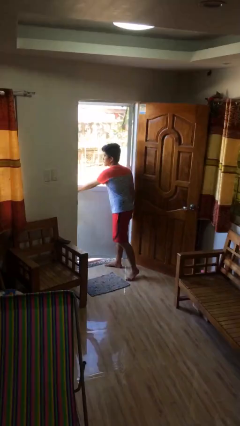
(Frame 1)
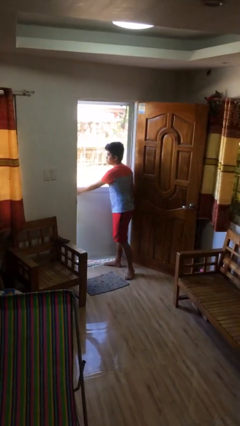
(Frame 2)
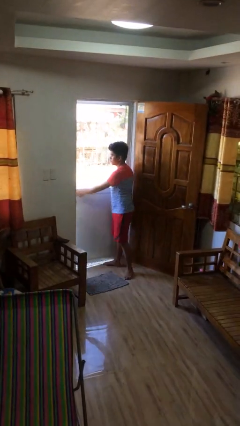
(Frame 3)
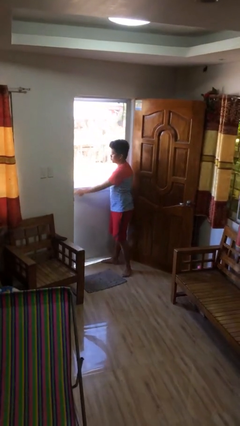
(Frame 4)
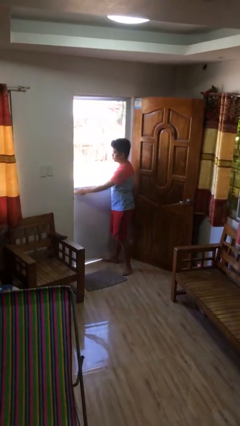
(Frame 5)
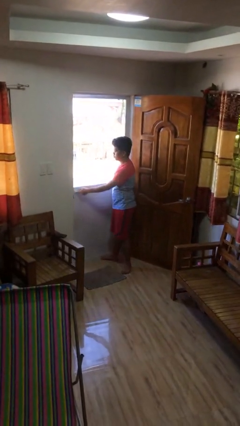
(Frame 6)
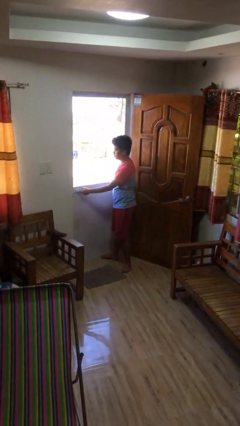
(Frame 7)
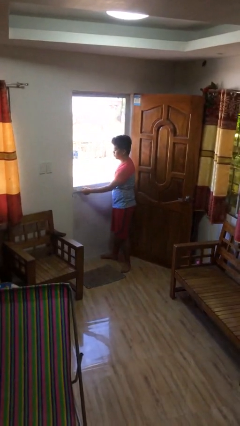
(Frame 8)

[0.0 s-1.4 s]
person closes facility door

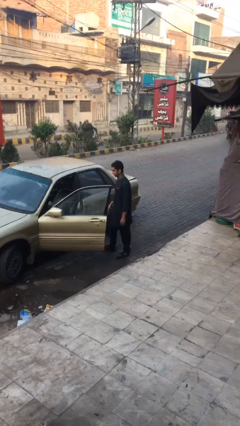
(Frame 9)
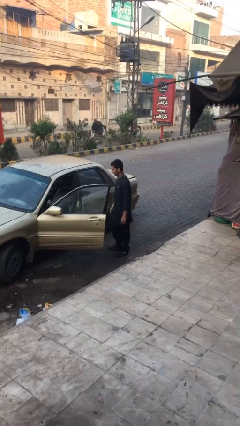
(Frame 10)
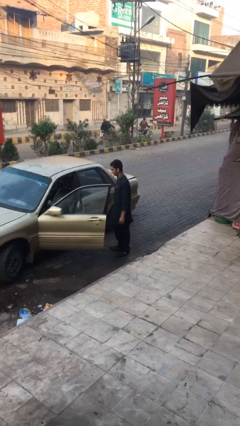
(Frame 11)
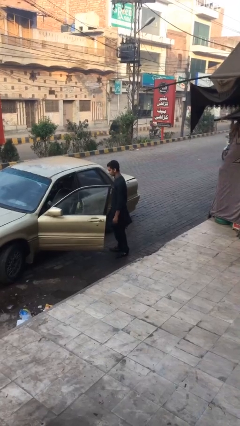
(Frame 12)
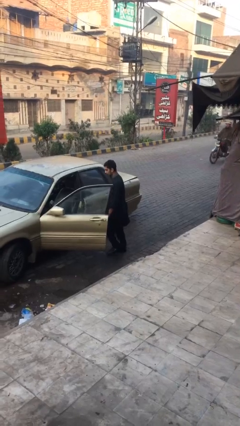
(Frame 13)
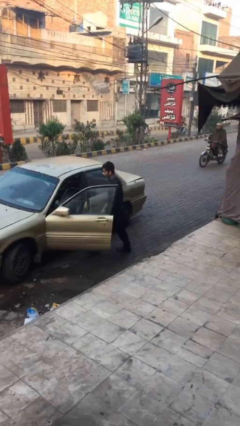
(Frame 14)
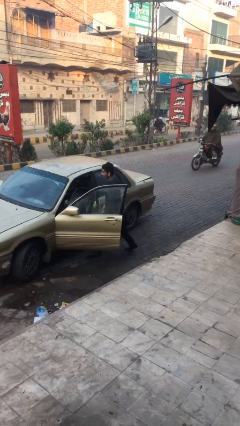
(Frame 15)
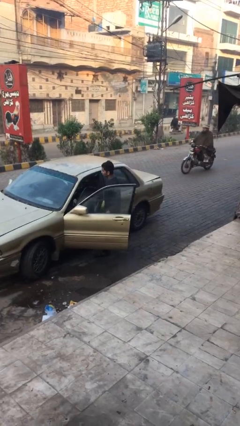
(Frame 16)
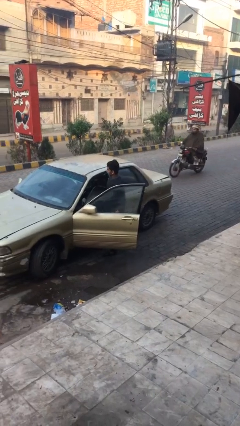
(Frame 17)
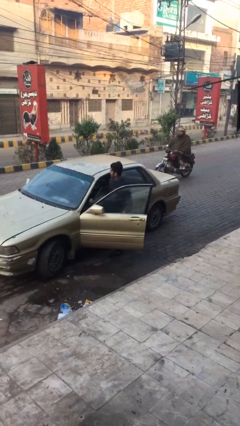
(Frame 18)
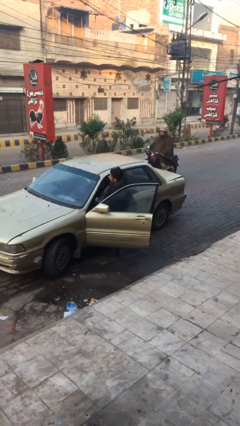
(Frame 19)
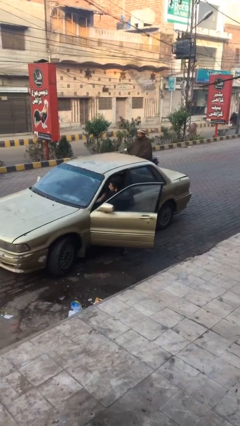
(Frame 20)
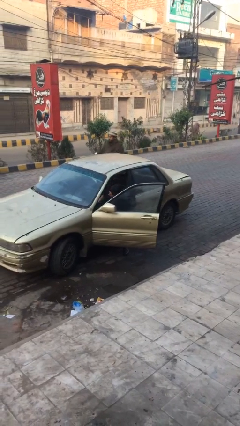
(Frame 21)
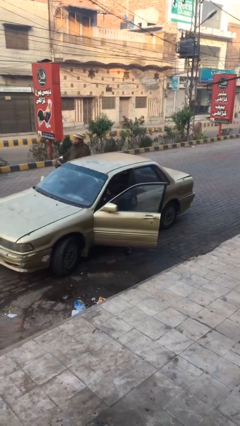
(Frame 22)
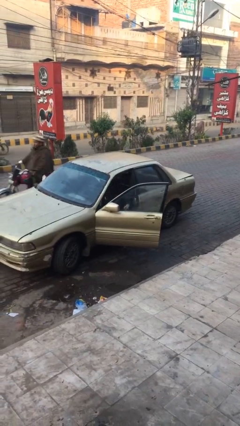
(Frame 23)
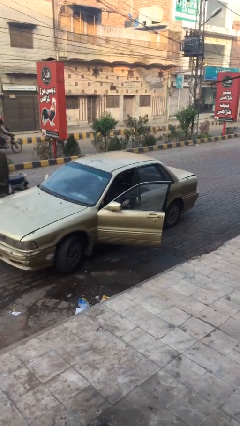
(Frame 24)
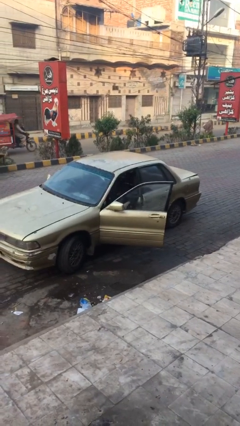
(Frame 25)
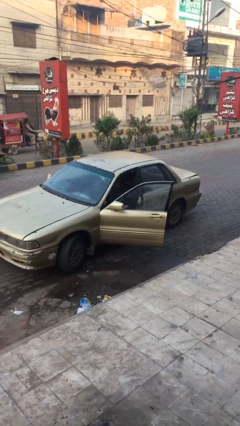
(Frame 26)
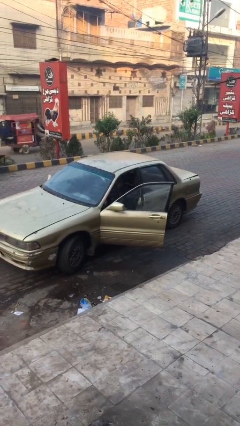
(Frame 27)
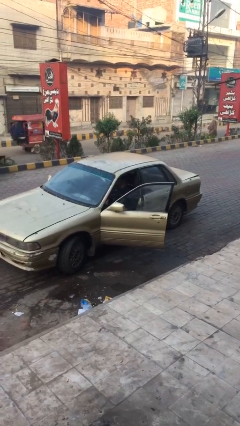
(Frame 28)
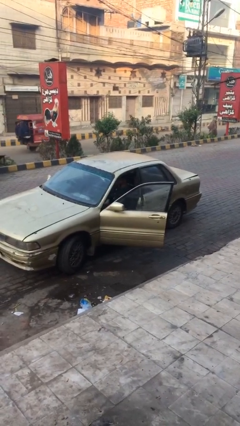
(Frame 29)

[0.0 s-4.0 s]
person enters car

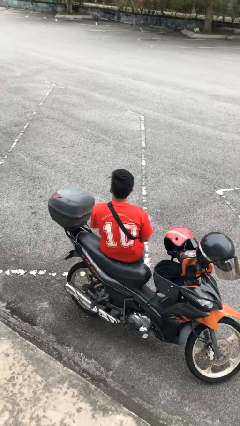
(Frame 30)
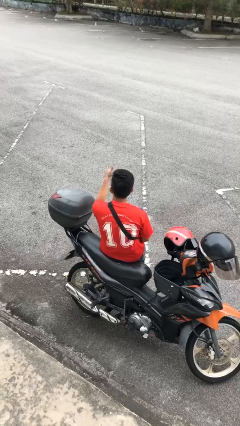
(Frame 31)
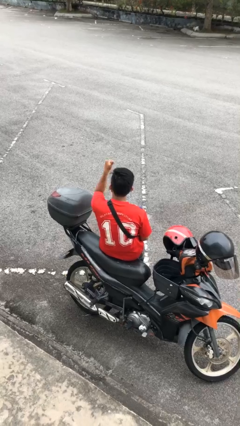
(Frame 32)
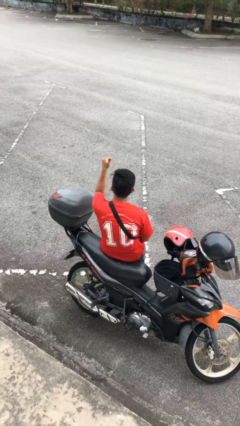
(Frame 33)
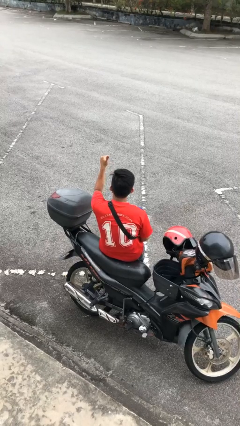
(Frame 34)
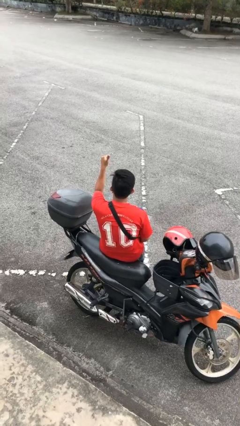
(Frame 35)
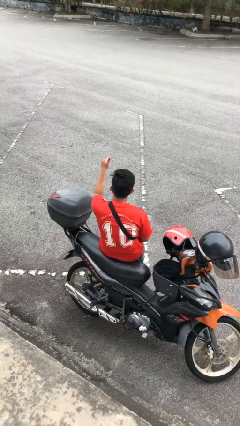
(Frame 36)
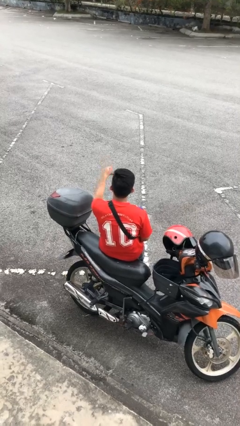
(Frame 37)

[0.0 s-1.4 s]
person gestures thumbs up

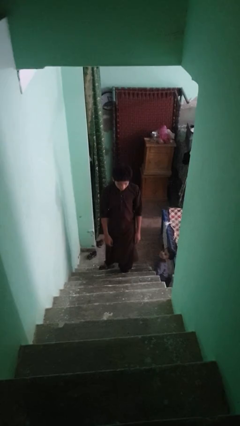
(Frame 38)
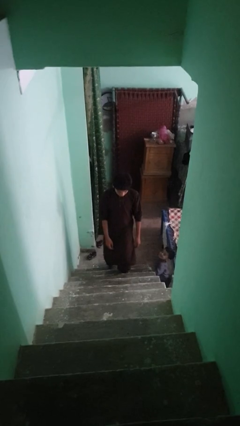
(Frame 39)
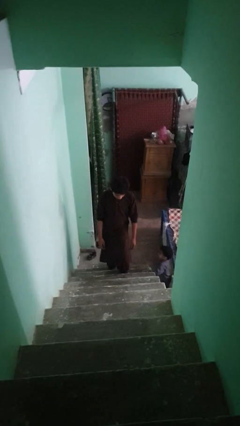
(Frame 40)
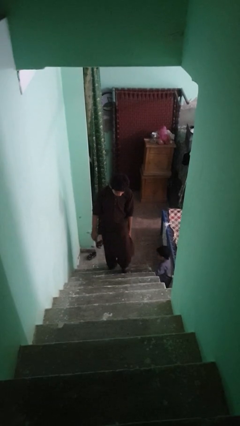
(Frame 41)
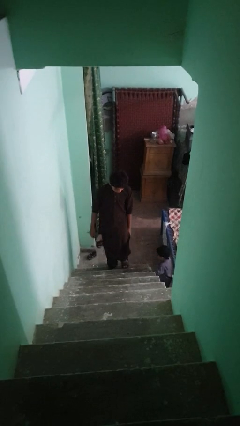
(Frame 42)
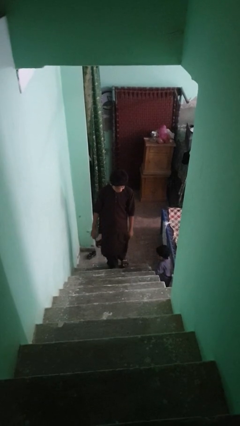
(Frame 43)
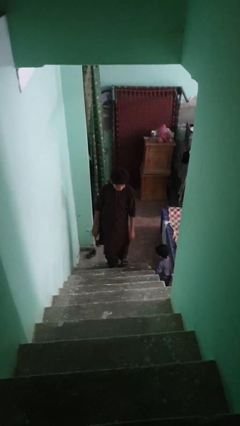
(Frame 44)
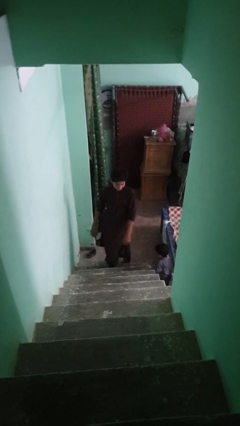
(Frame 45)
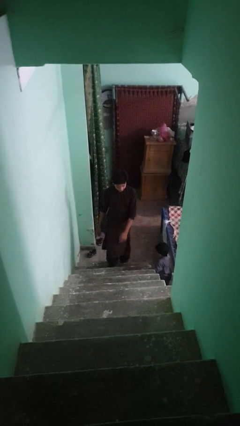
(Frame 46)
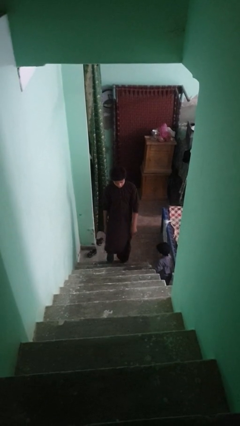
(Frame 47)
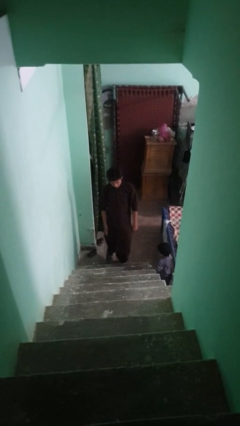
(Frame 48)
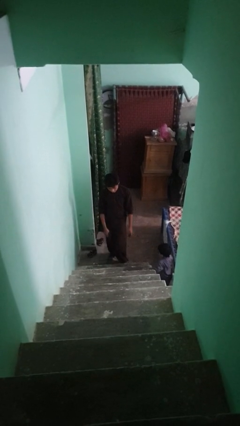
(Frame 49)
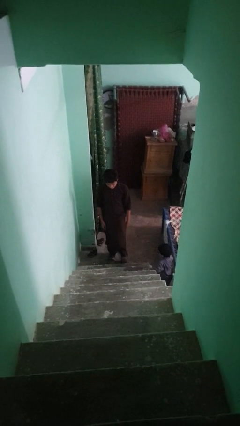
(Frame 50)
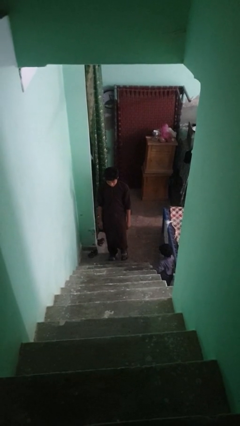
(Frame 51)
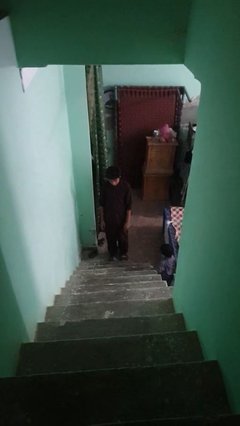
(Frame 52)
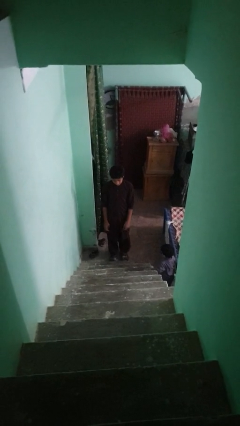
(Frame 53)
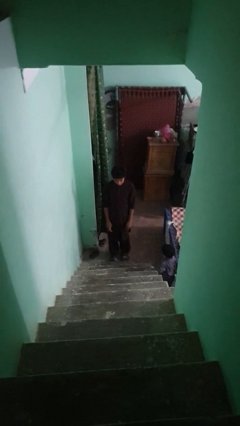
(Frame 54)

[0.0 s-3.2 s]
person climbs down stairs

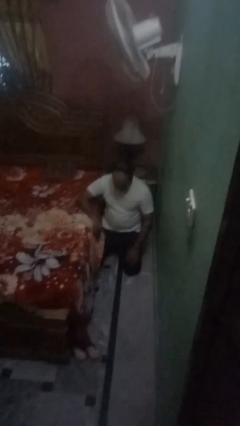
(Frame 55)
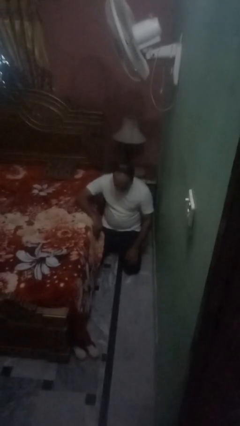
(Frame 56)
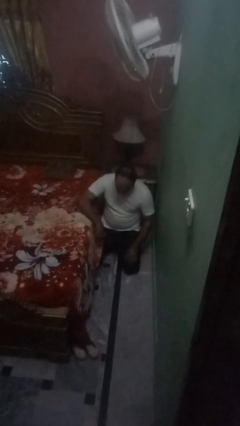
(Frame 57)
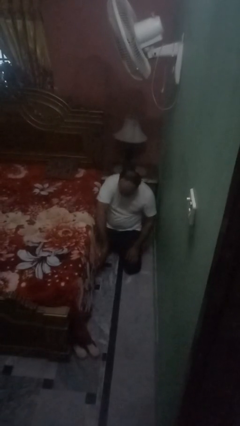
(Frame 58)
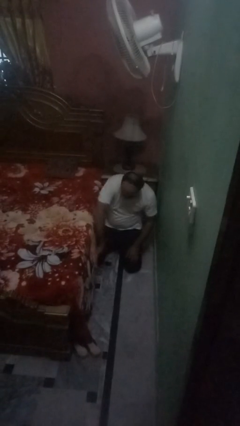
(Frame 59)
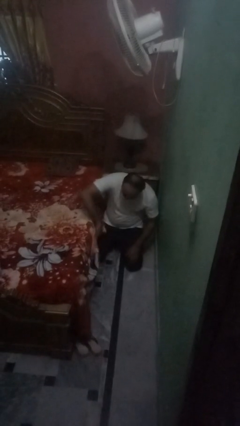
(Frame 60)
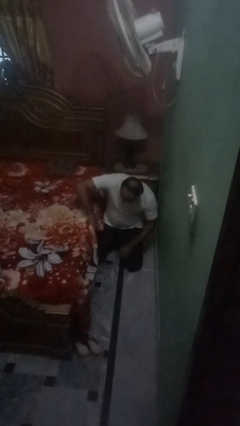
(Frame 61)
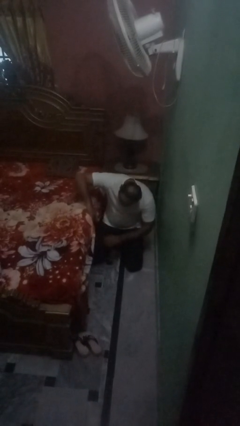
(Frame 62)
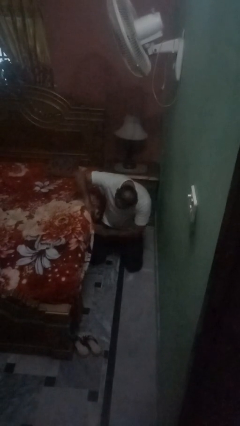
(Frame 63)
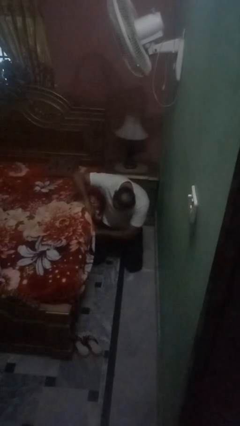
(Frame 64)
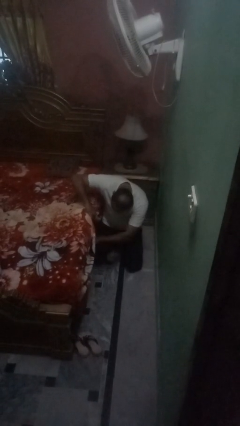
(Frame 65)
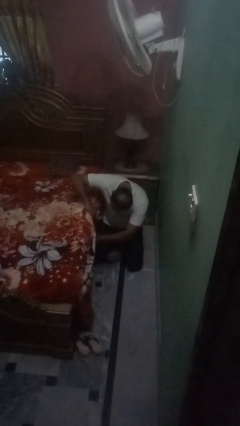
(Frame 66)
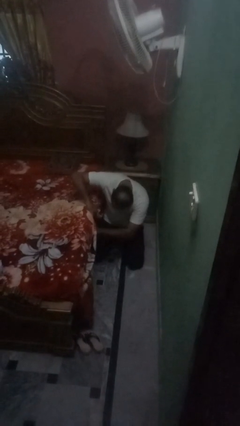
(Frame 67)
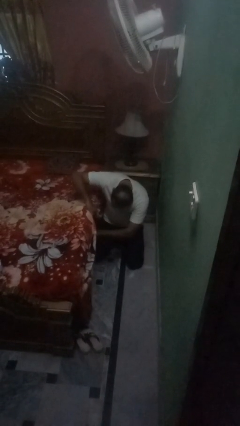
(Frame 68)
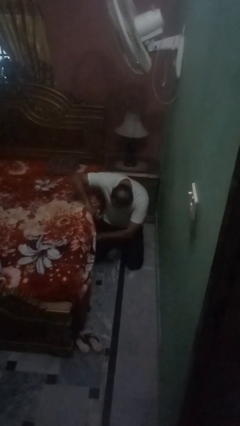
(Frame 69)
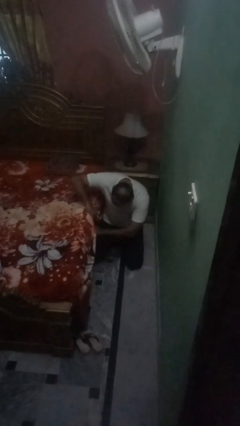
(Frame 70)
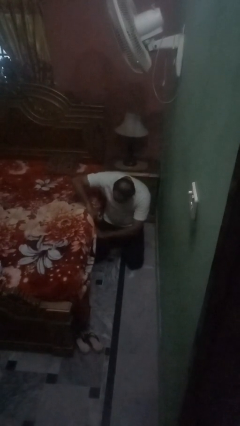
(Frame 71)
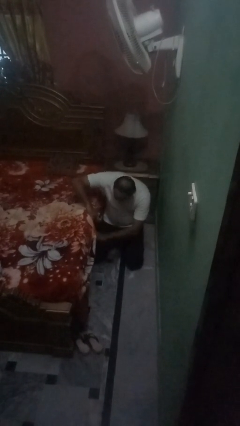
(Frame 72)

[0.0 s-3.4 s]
person searches under bed

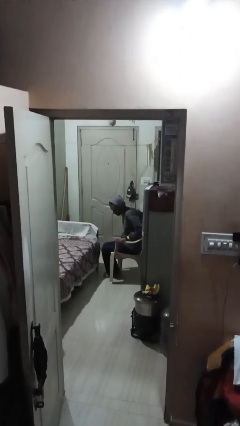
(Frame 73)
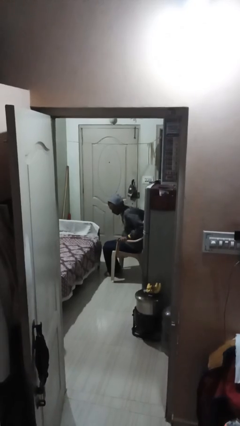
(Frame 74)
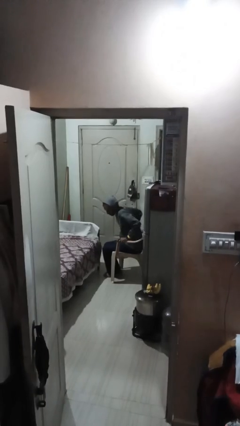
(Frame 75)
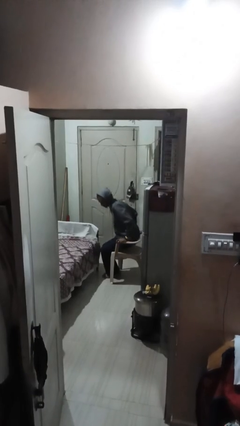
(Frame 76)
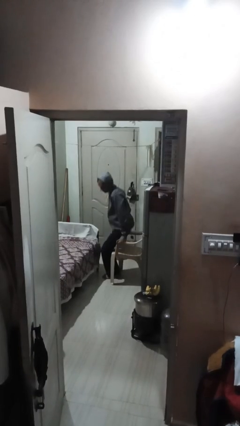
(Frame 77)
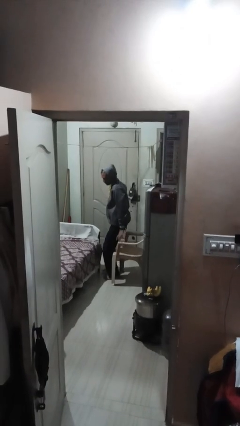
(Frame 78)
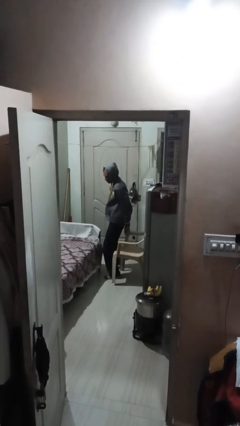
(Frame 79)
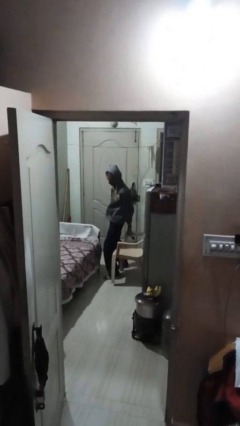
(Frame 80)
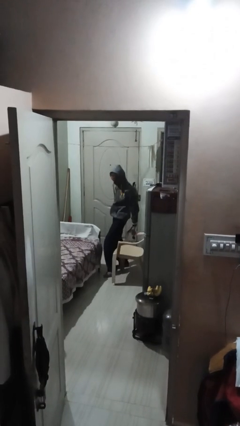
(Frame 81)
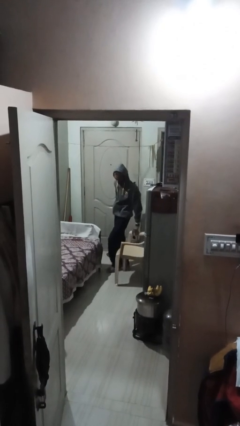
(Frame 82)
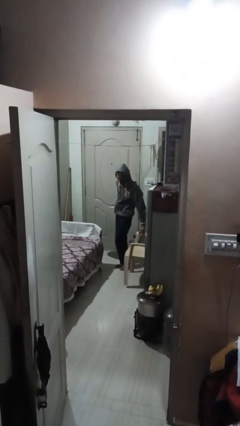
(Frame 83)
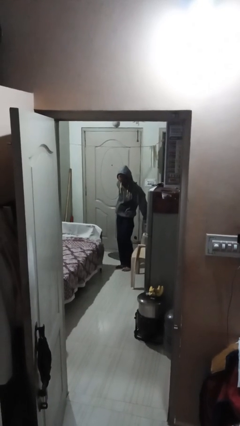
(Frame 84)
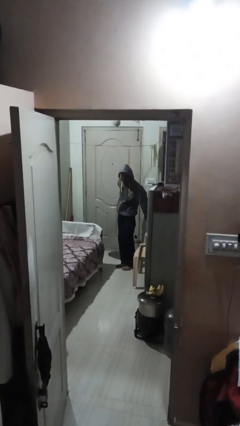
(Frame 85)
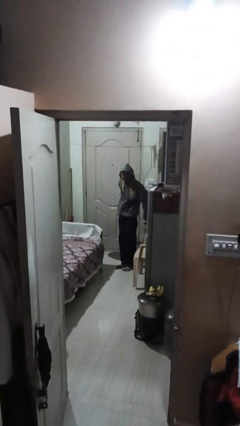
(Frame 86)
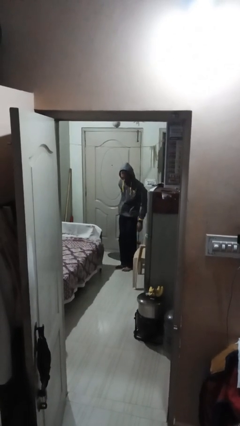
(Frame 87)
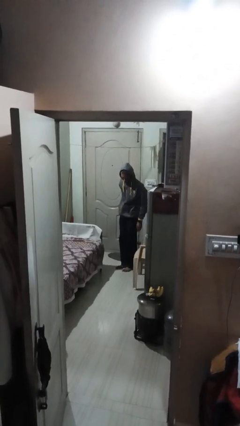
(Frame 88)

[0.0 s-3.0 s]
person stands up

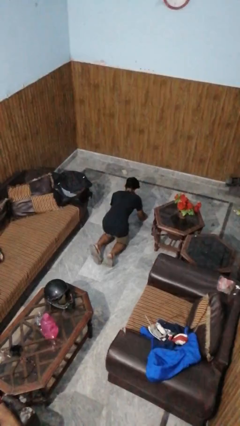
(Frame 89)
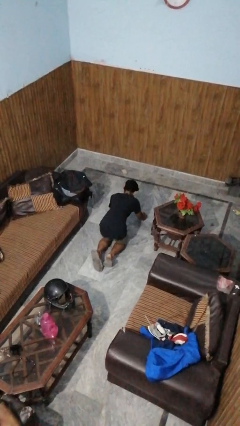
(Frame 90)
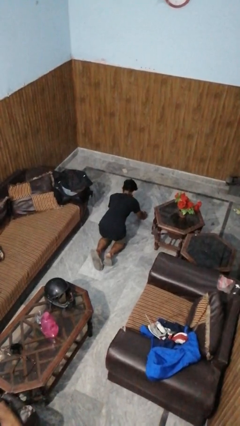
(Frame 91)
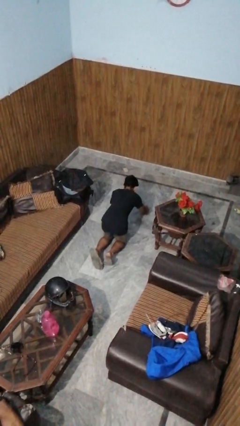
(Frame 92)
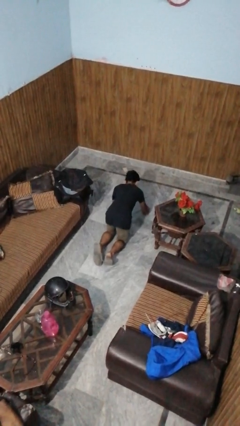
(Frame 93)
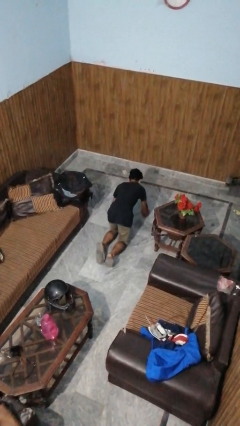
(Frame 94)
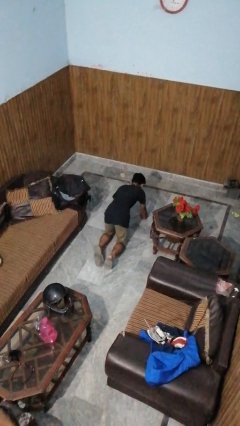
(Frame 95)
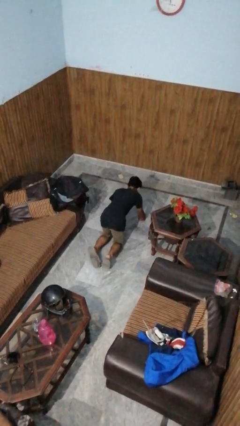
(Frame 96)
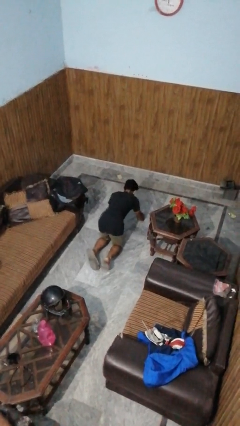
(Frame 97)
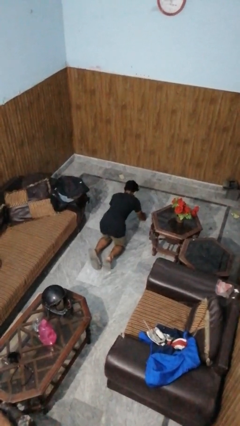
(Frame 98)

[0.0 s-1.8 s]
person crawls
